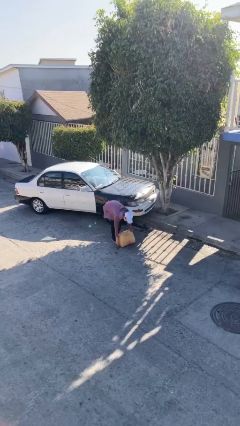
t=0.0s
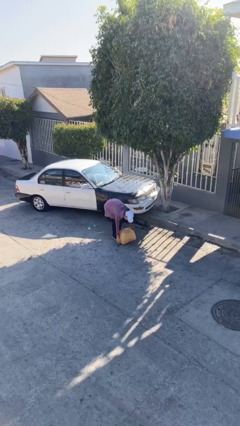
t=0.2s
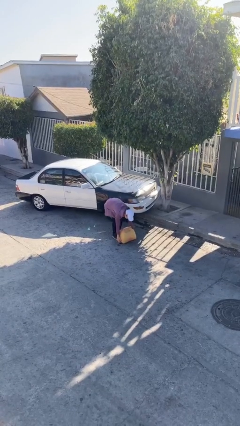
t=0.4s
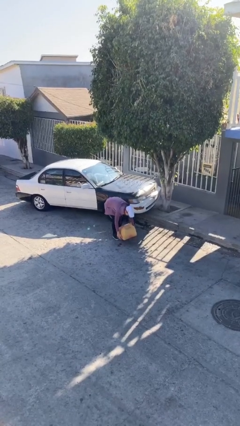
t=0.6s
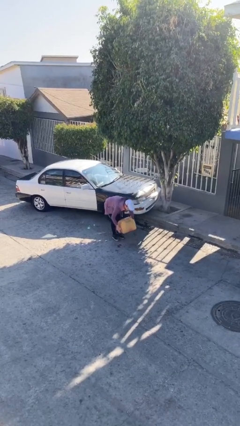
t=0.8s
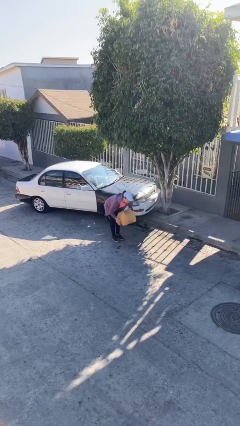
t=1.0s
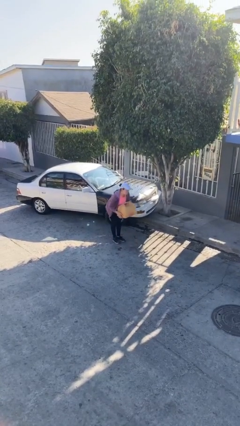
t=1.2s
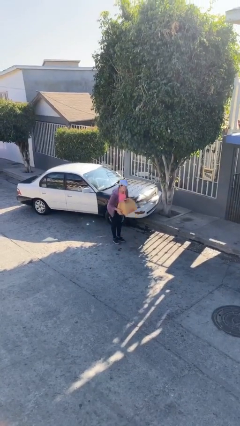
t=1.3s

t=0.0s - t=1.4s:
person picks up object from floor

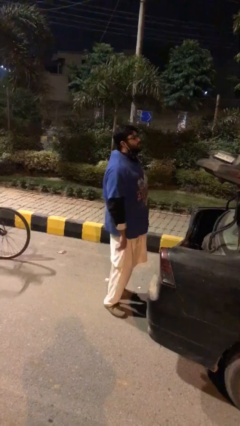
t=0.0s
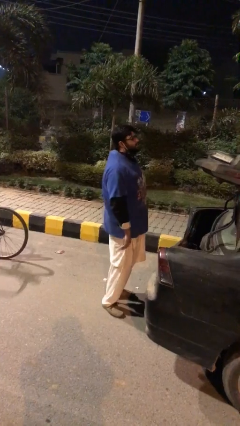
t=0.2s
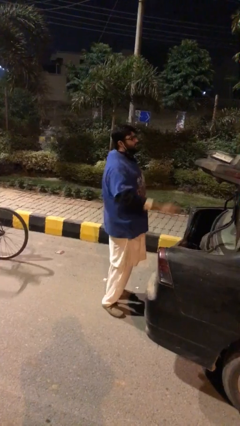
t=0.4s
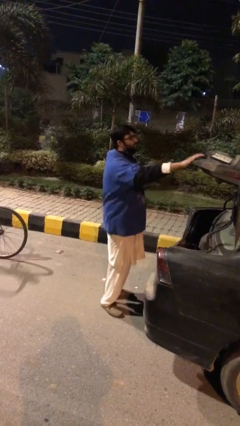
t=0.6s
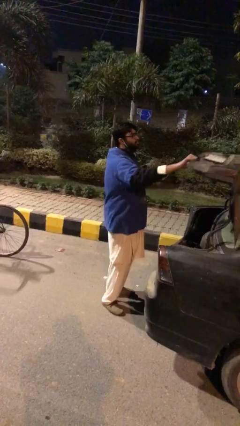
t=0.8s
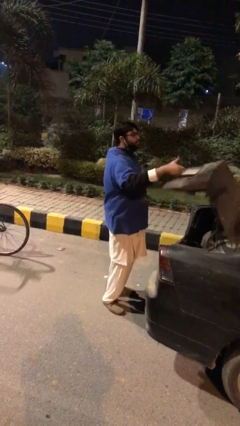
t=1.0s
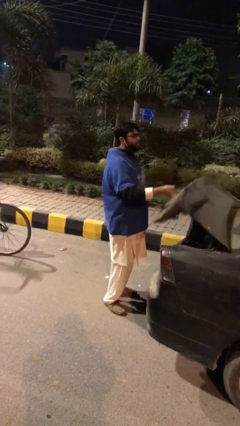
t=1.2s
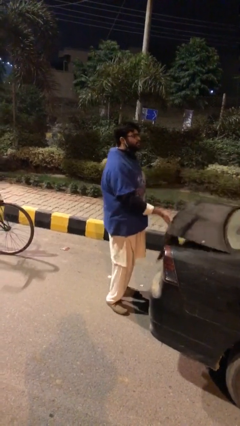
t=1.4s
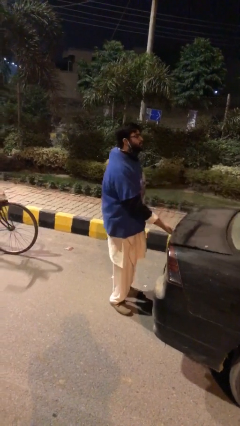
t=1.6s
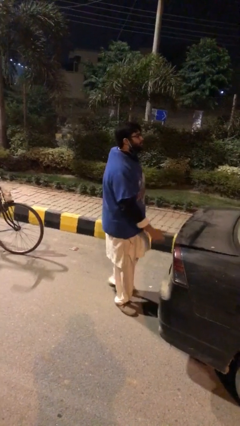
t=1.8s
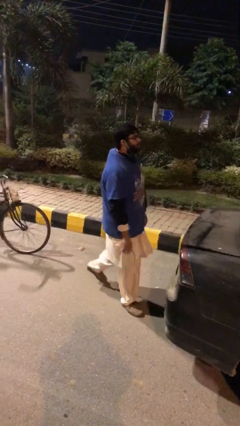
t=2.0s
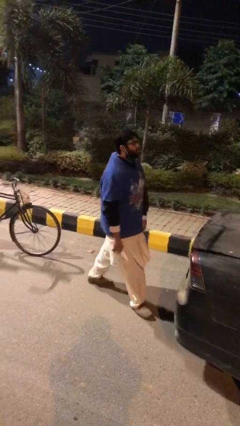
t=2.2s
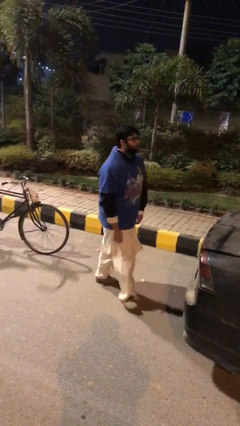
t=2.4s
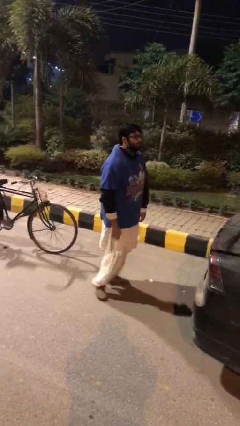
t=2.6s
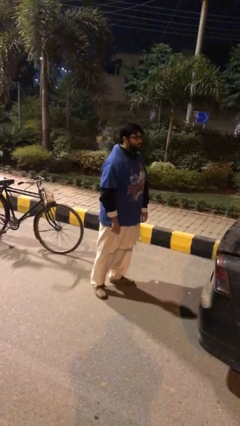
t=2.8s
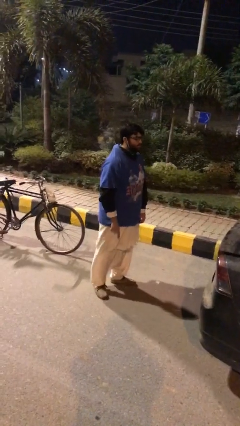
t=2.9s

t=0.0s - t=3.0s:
person closes car trunk

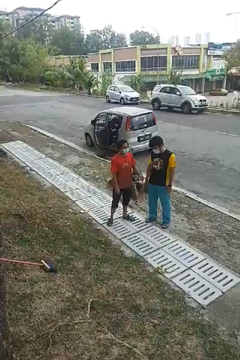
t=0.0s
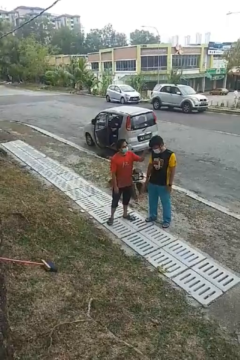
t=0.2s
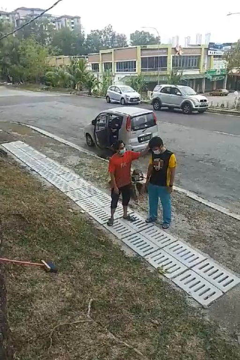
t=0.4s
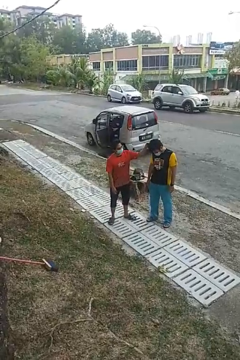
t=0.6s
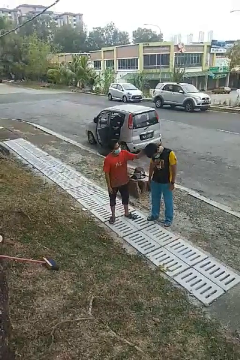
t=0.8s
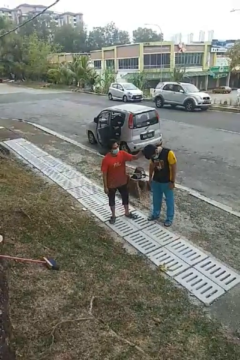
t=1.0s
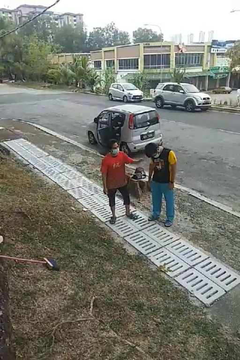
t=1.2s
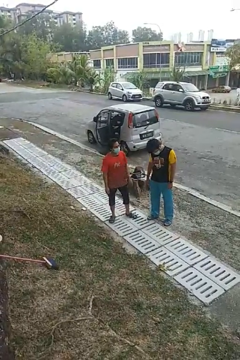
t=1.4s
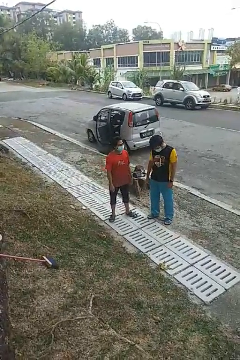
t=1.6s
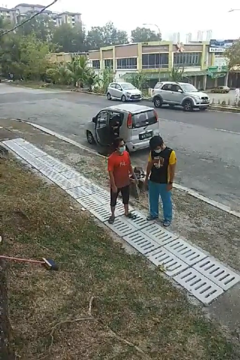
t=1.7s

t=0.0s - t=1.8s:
person grabs person by hair

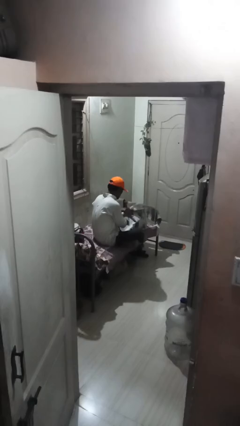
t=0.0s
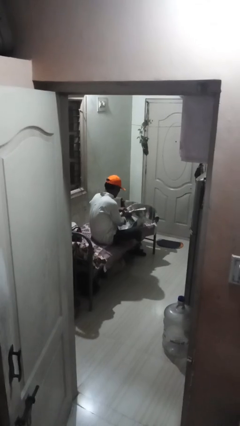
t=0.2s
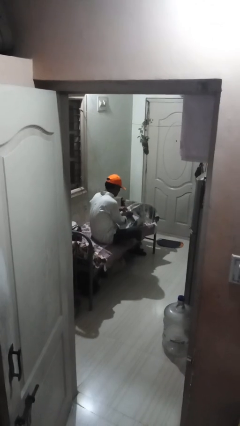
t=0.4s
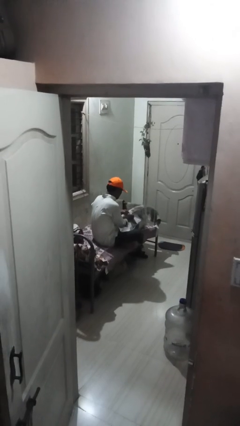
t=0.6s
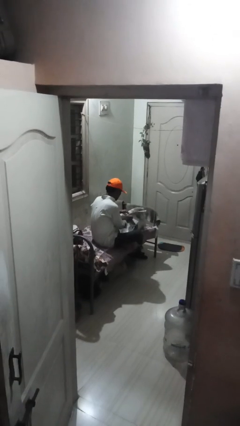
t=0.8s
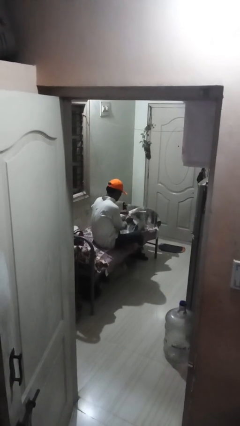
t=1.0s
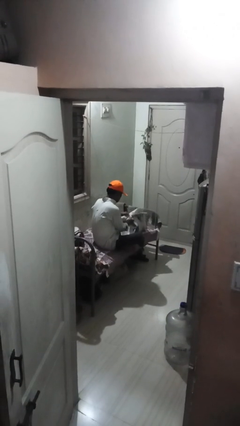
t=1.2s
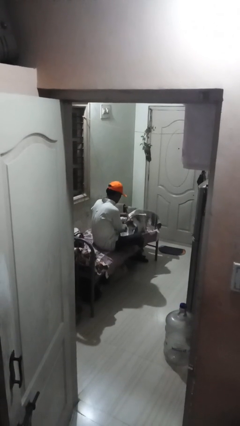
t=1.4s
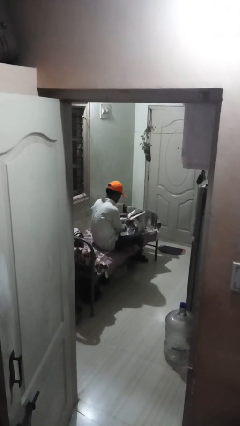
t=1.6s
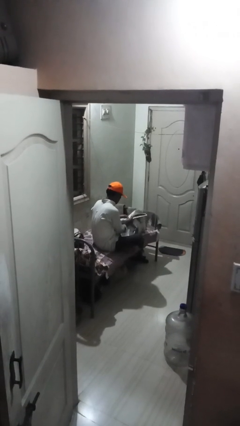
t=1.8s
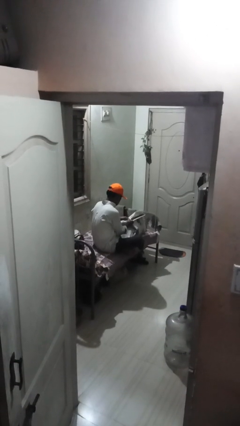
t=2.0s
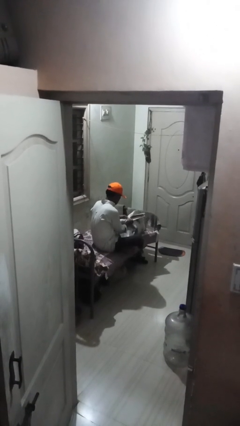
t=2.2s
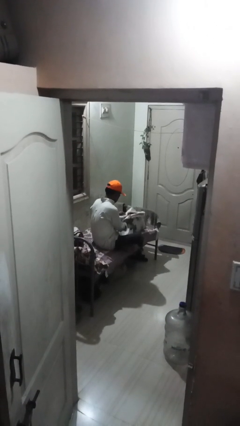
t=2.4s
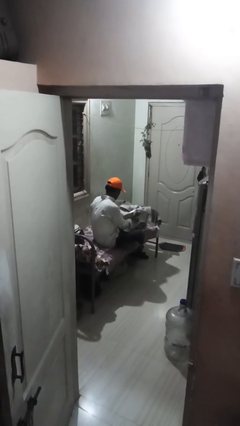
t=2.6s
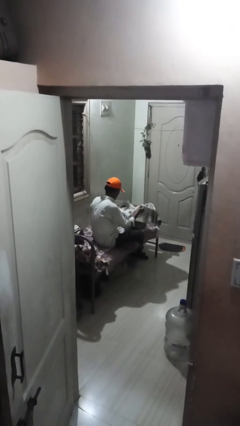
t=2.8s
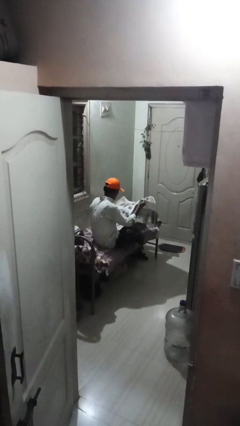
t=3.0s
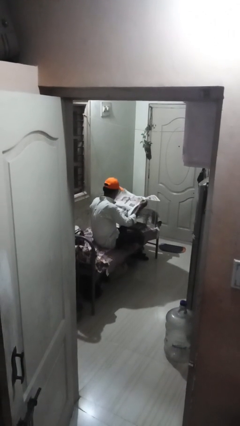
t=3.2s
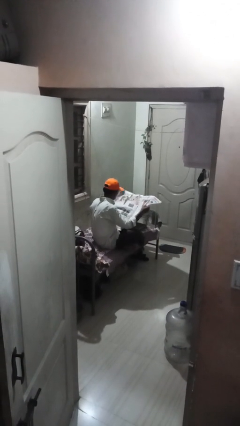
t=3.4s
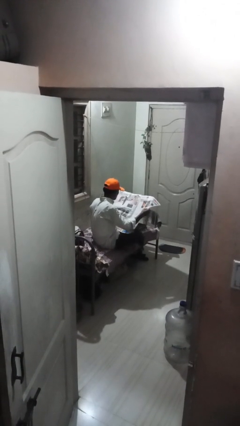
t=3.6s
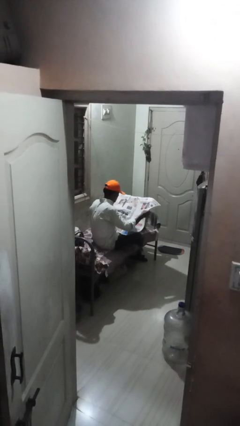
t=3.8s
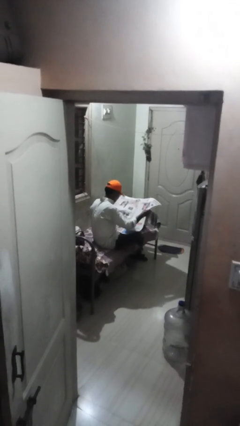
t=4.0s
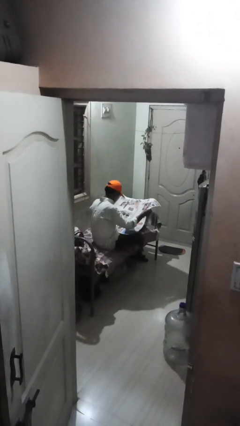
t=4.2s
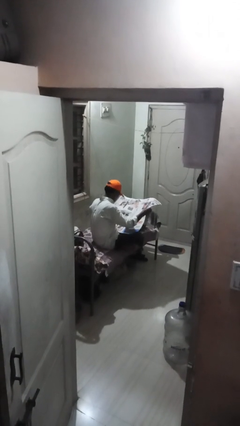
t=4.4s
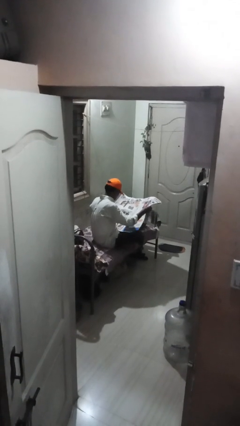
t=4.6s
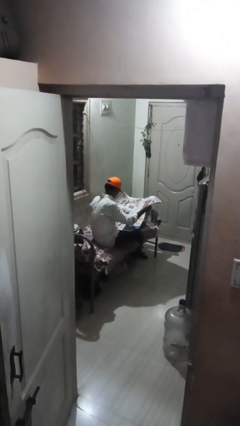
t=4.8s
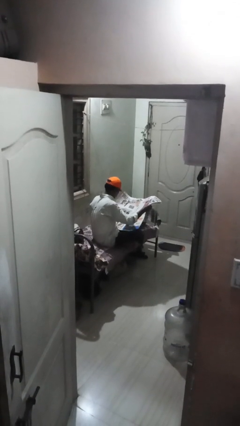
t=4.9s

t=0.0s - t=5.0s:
person reads newspaper

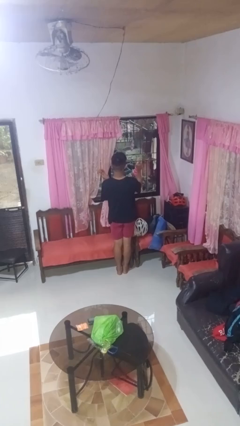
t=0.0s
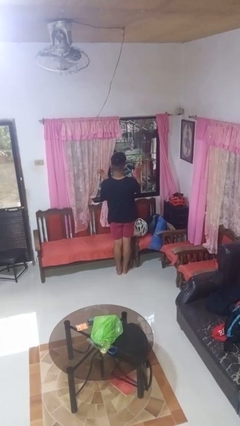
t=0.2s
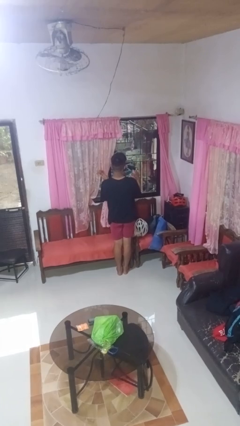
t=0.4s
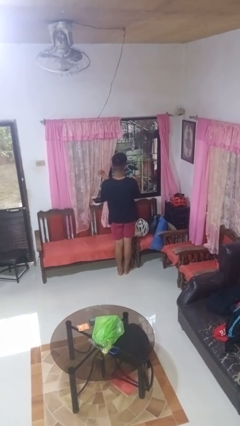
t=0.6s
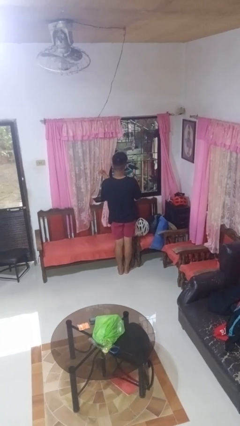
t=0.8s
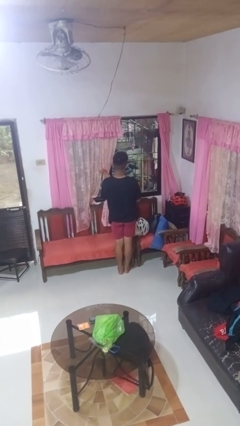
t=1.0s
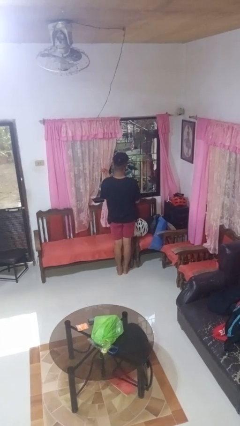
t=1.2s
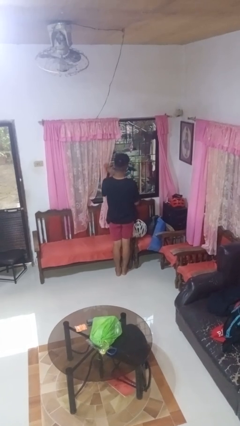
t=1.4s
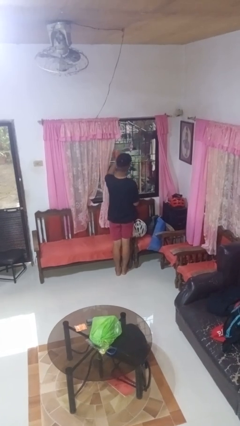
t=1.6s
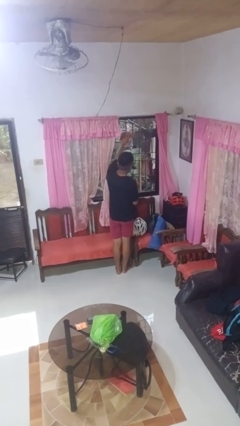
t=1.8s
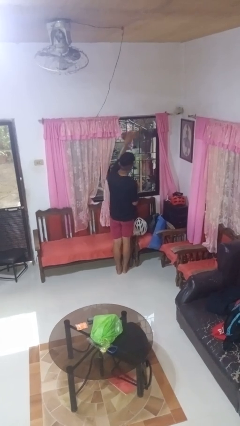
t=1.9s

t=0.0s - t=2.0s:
person sprays from bottle

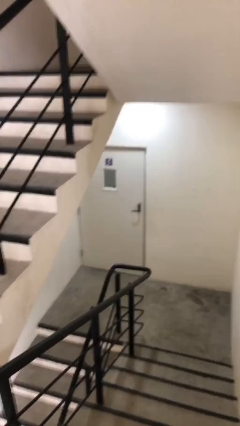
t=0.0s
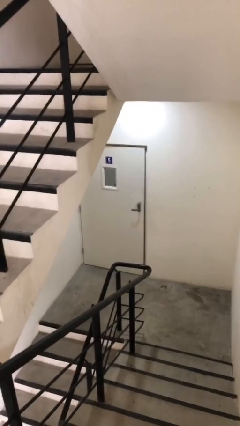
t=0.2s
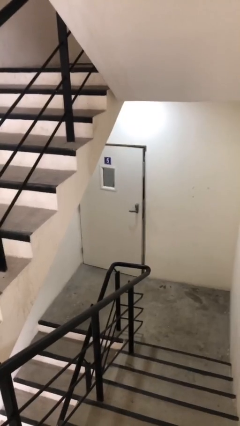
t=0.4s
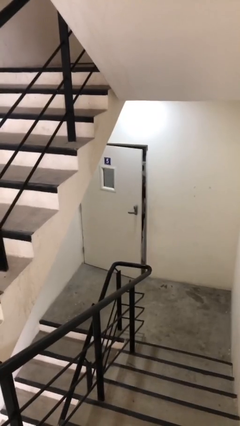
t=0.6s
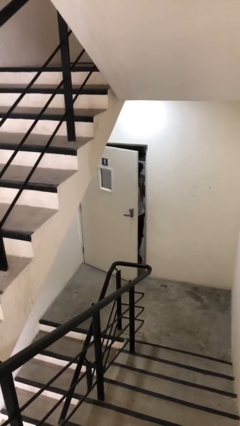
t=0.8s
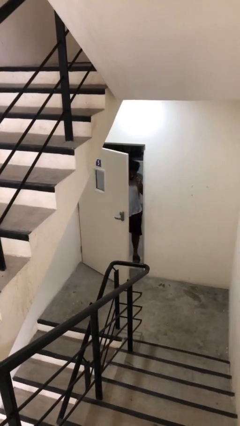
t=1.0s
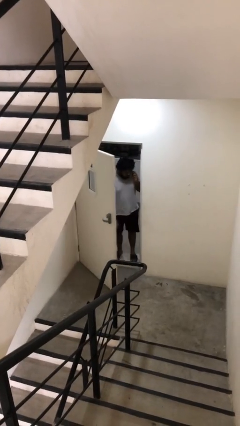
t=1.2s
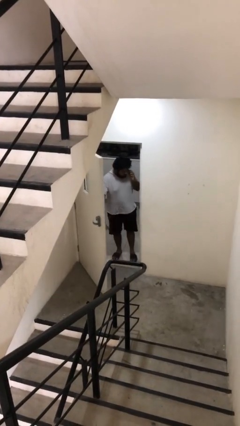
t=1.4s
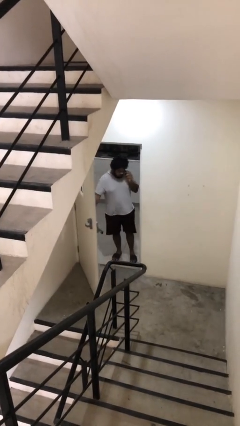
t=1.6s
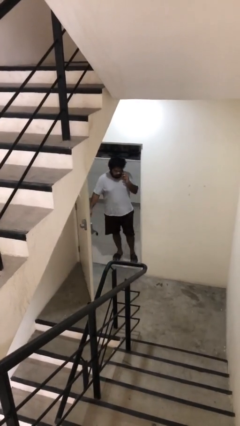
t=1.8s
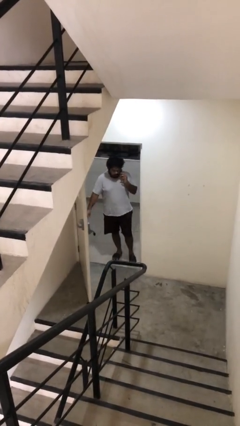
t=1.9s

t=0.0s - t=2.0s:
person opens facility door

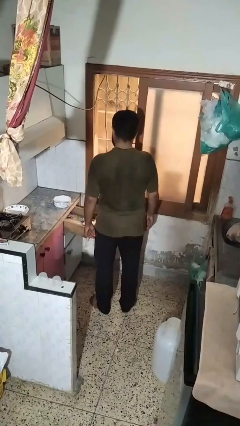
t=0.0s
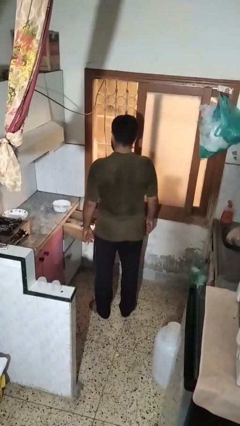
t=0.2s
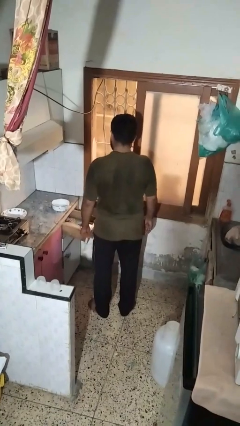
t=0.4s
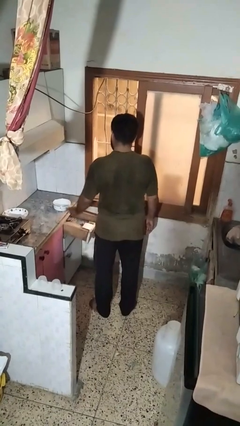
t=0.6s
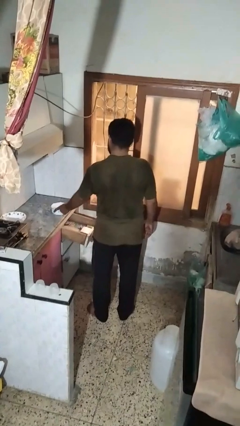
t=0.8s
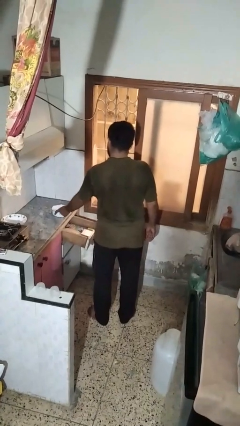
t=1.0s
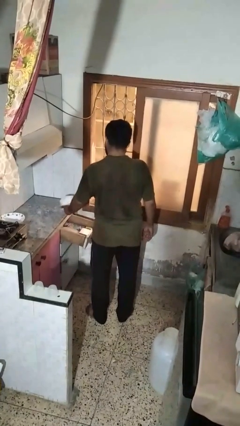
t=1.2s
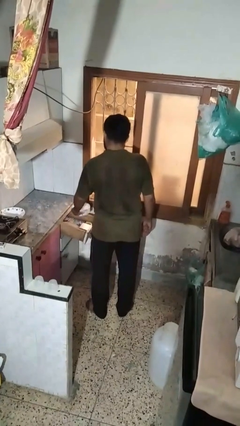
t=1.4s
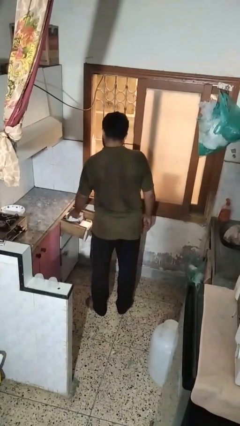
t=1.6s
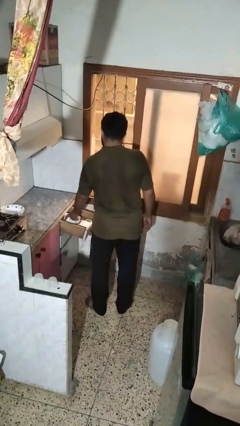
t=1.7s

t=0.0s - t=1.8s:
person puts object into kitchen drawer

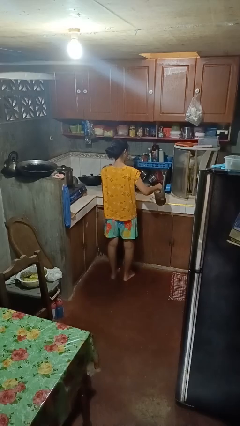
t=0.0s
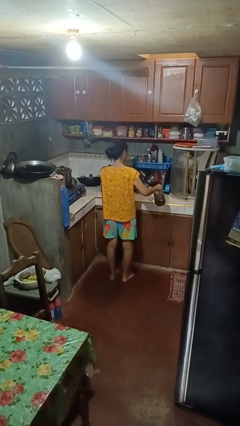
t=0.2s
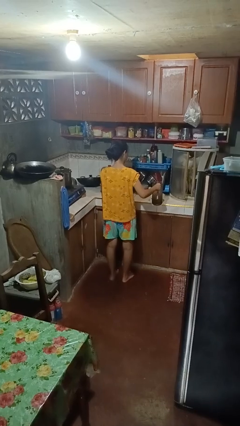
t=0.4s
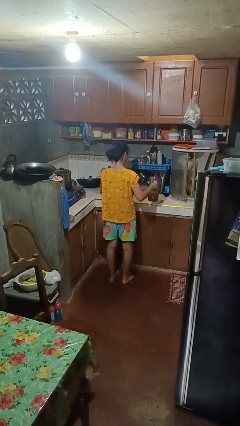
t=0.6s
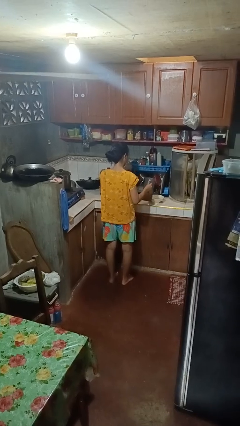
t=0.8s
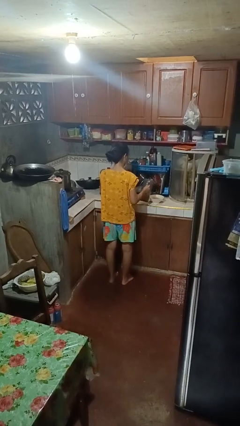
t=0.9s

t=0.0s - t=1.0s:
person pours into bowl
